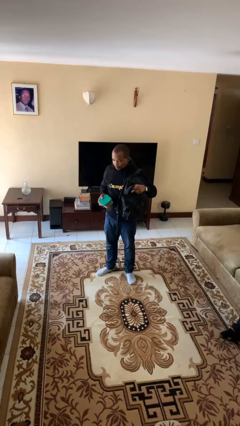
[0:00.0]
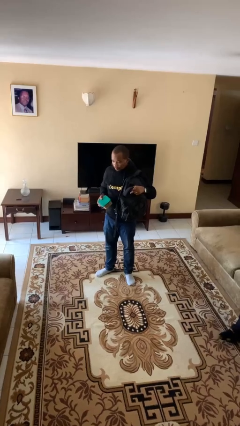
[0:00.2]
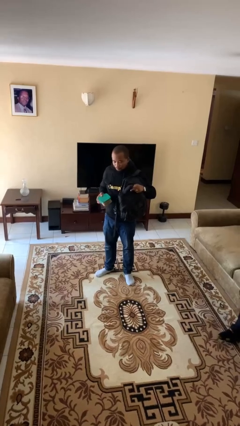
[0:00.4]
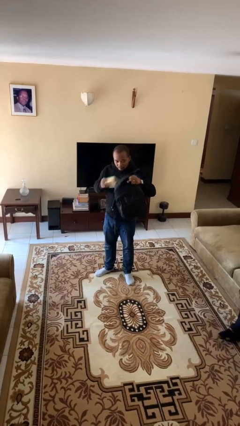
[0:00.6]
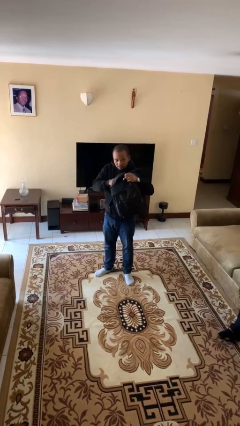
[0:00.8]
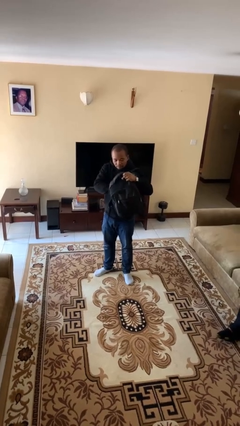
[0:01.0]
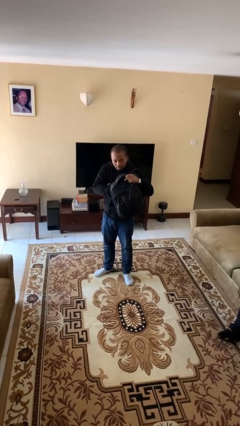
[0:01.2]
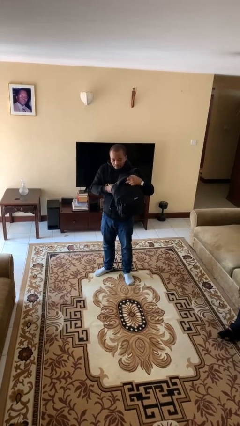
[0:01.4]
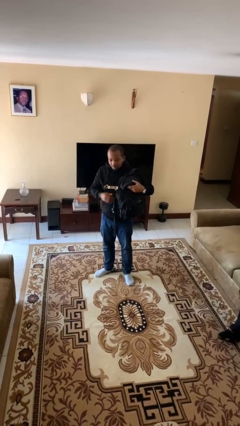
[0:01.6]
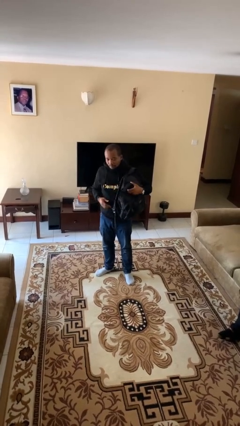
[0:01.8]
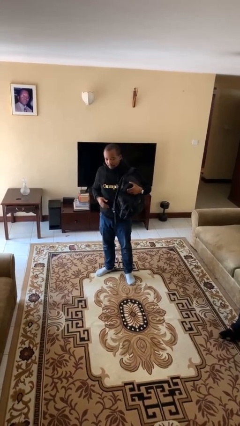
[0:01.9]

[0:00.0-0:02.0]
person puts object into backpack

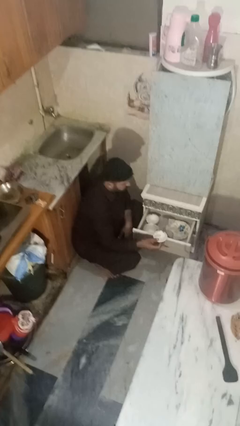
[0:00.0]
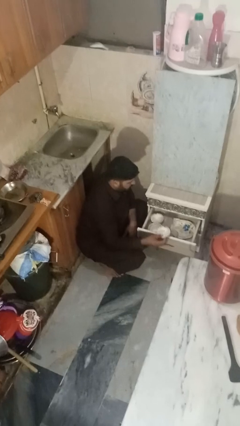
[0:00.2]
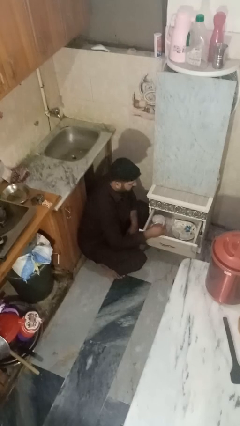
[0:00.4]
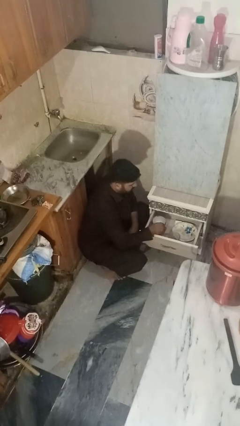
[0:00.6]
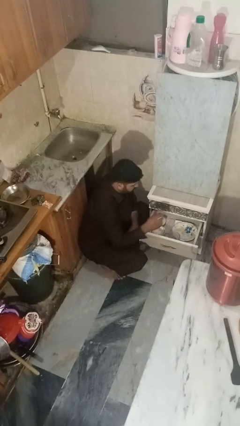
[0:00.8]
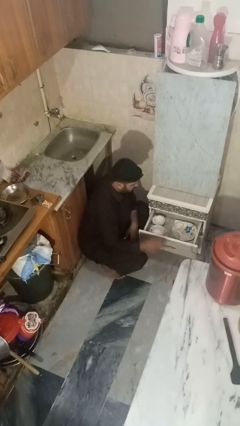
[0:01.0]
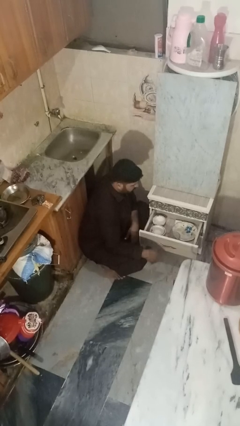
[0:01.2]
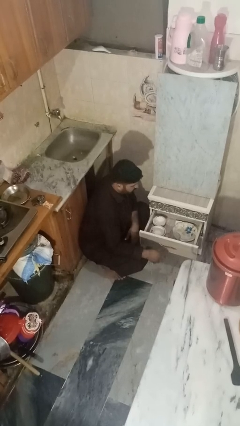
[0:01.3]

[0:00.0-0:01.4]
person puts object into kitchen drawer

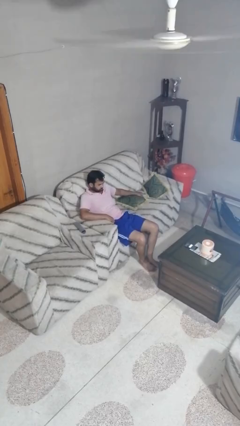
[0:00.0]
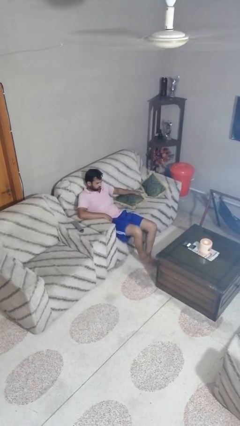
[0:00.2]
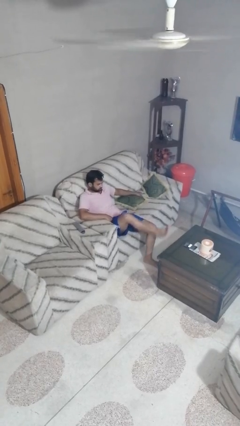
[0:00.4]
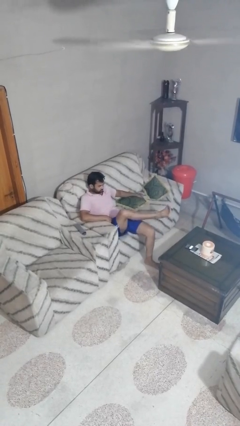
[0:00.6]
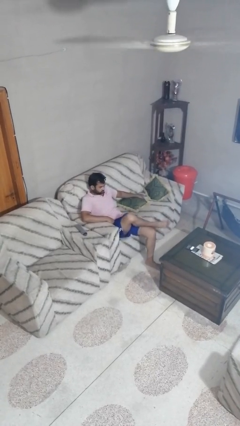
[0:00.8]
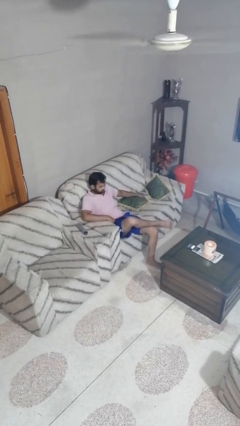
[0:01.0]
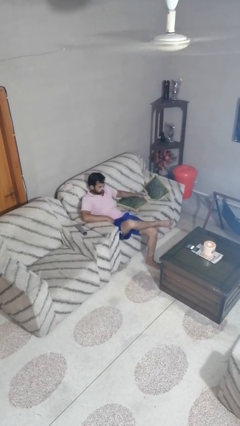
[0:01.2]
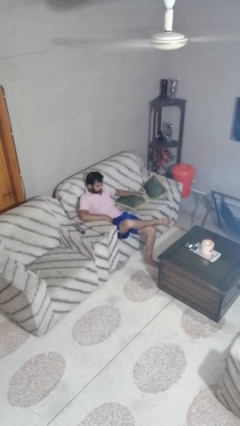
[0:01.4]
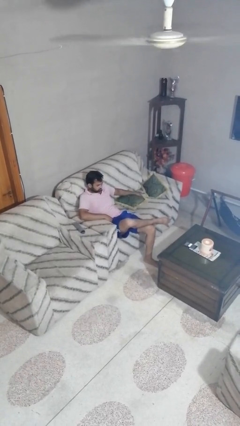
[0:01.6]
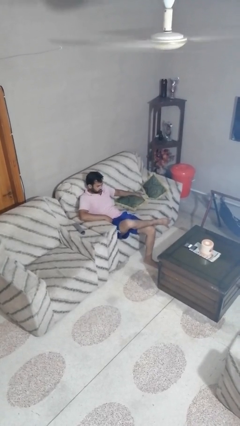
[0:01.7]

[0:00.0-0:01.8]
person crosses legs

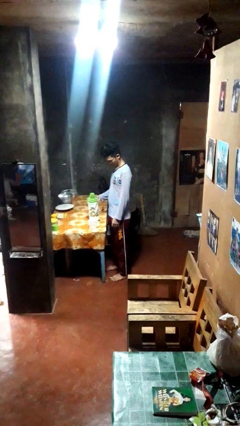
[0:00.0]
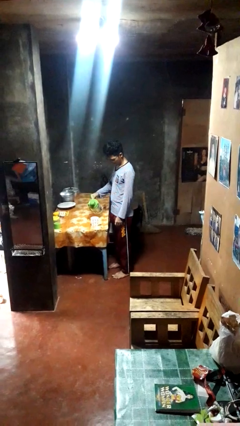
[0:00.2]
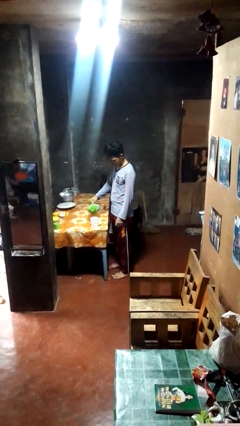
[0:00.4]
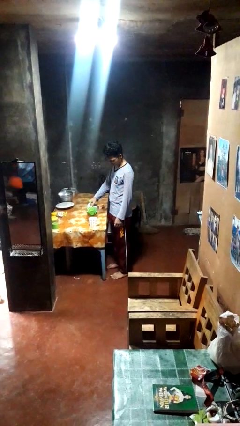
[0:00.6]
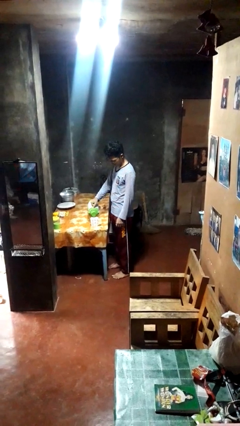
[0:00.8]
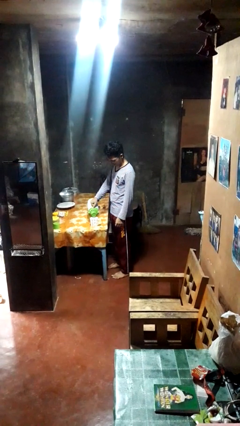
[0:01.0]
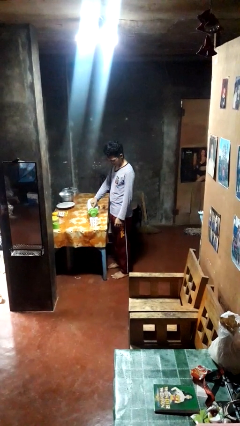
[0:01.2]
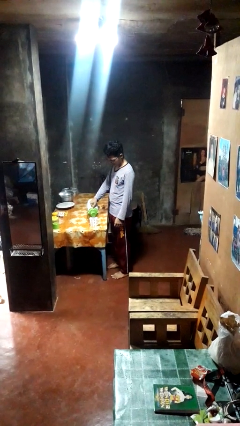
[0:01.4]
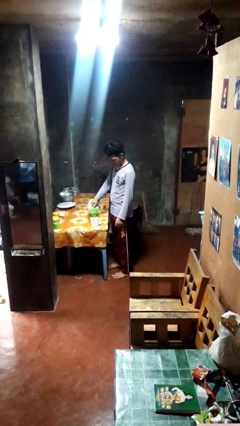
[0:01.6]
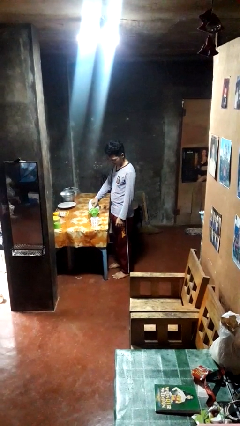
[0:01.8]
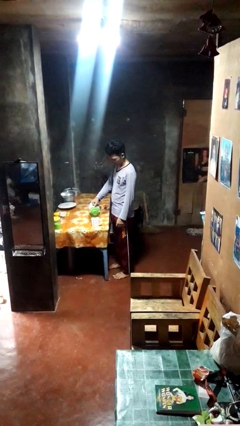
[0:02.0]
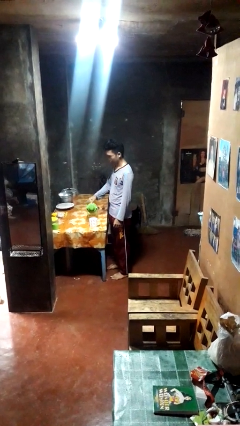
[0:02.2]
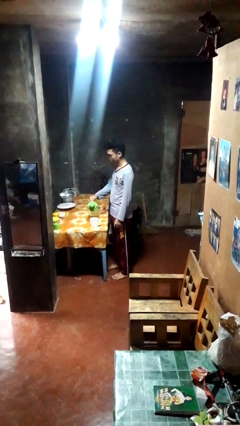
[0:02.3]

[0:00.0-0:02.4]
person pours coffee into mug

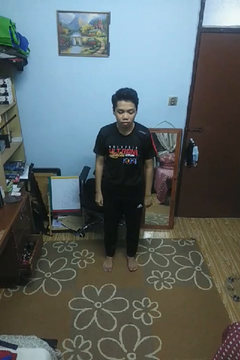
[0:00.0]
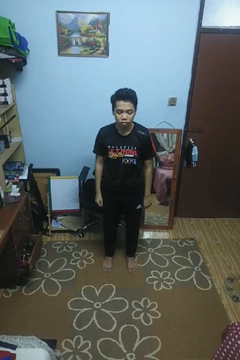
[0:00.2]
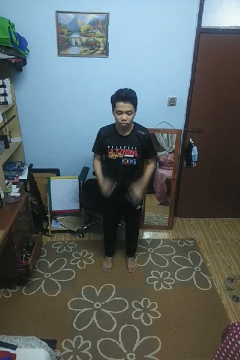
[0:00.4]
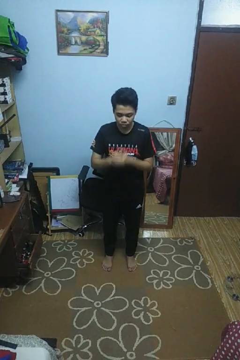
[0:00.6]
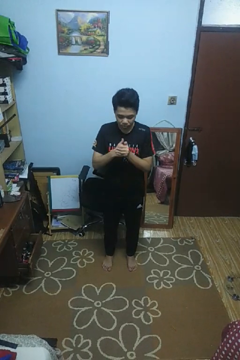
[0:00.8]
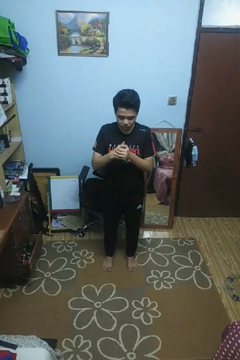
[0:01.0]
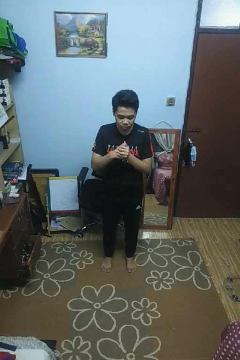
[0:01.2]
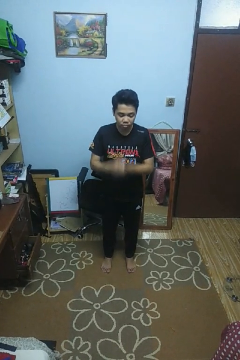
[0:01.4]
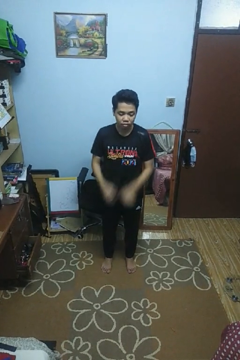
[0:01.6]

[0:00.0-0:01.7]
person cracks knuckles

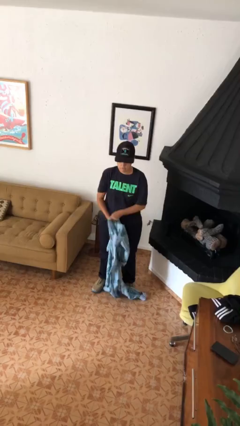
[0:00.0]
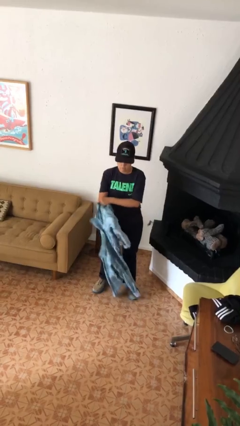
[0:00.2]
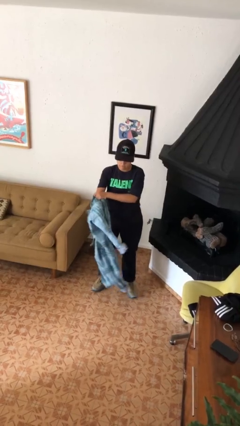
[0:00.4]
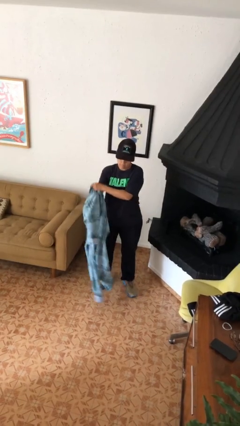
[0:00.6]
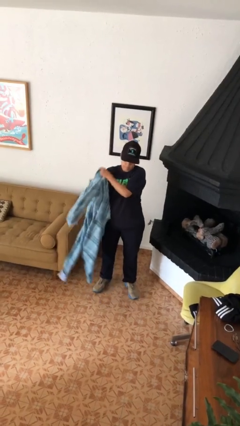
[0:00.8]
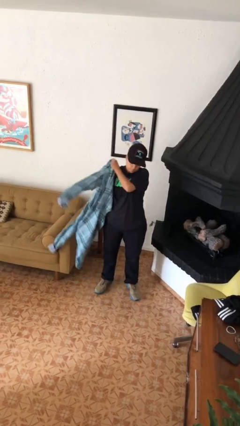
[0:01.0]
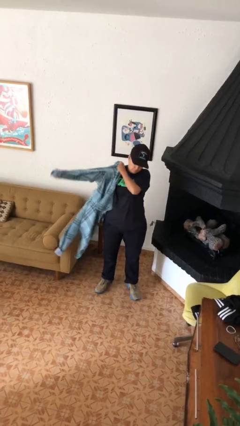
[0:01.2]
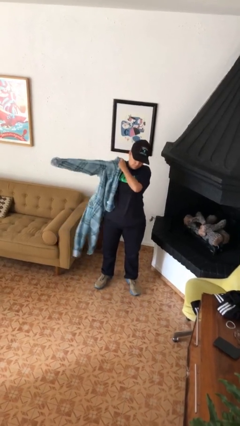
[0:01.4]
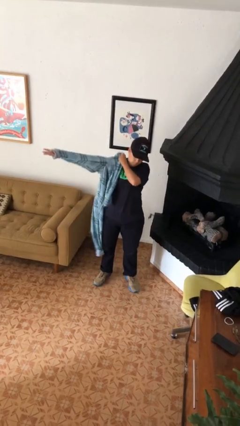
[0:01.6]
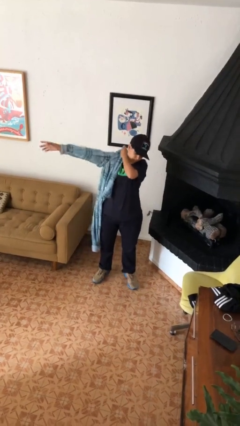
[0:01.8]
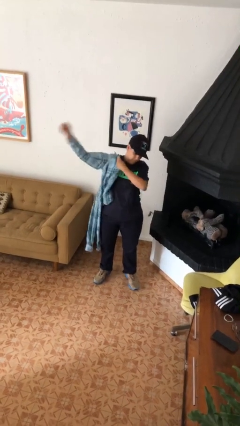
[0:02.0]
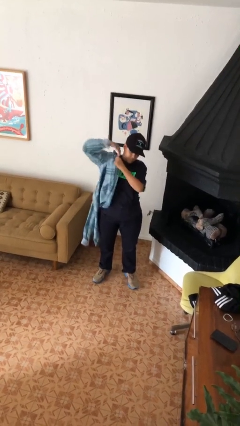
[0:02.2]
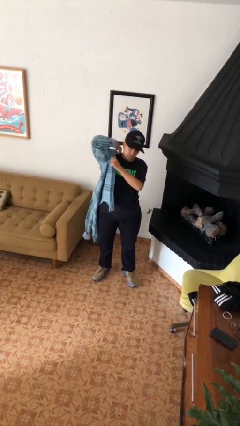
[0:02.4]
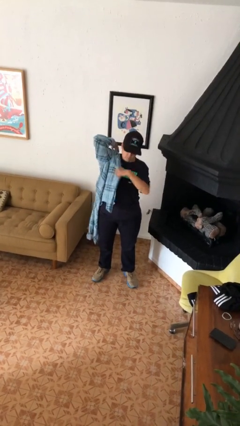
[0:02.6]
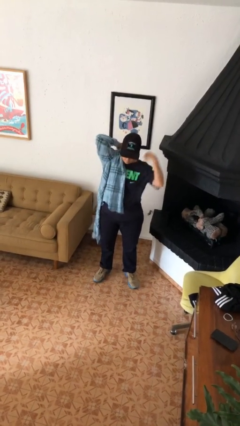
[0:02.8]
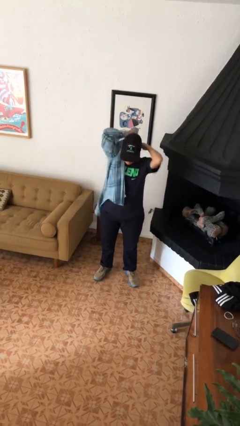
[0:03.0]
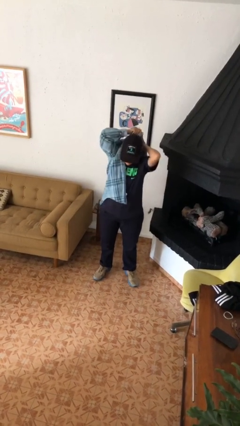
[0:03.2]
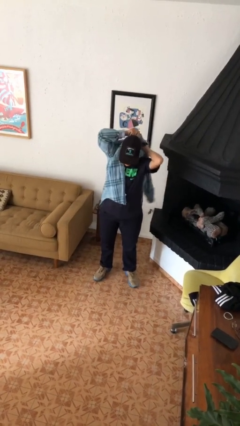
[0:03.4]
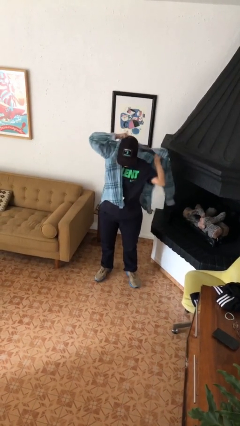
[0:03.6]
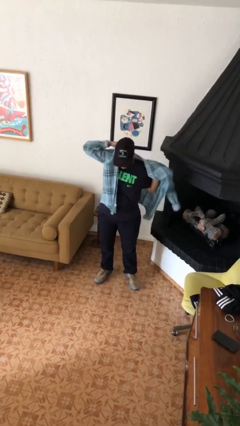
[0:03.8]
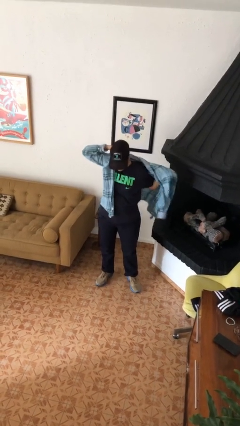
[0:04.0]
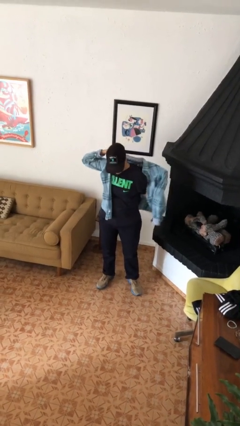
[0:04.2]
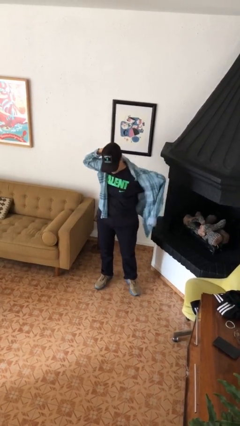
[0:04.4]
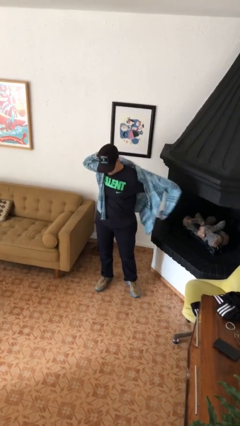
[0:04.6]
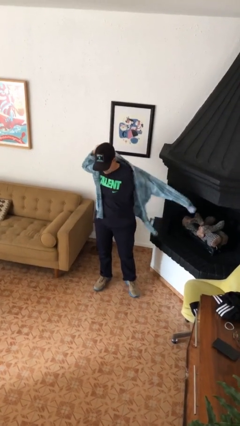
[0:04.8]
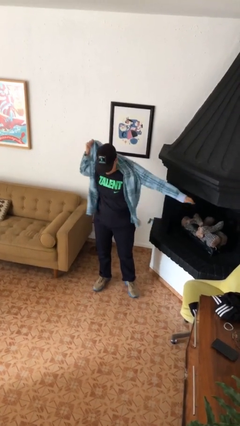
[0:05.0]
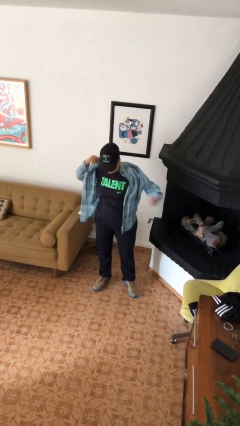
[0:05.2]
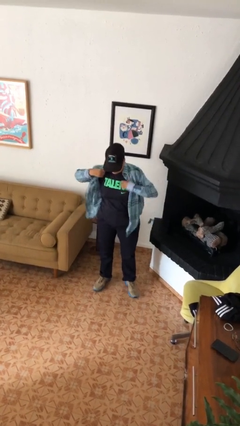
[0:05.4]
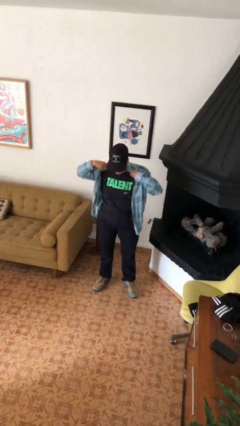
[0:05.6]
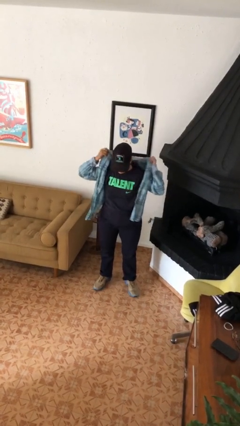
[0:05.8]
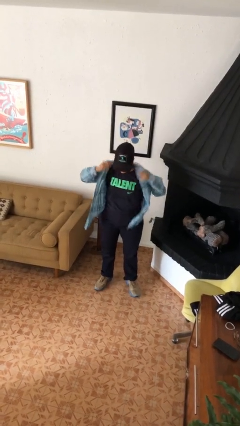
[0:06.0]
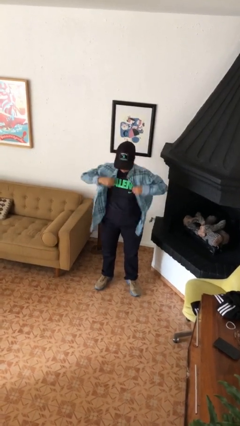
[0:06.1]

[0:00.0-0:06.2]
person puts on shirt

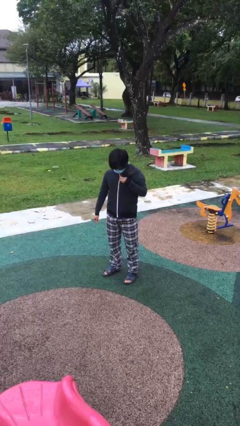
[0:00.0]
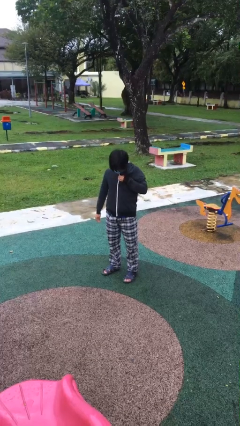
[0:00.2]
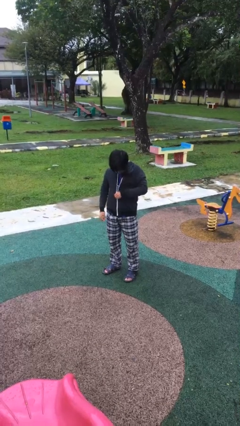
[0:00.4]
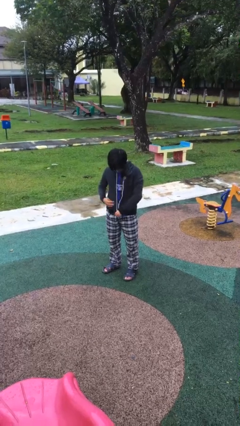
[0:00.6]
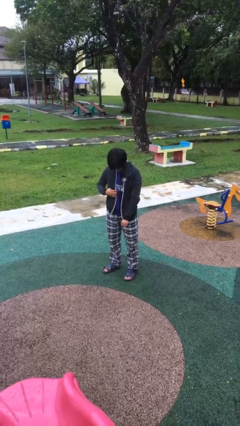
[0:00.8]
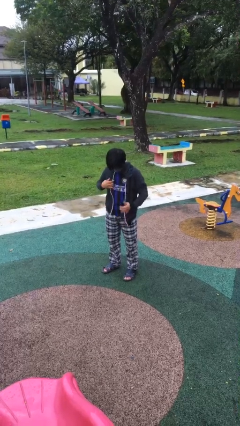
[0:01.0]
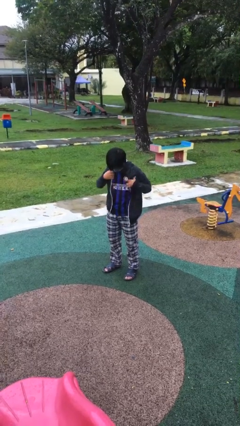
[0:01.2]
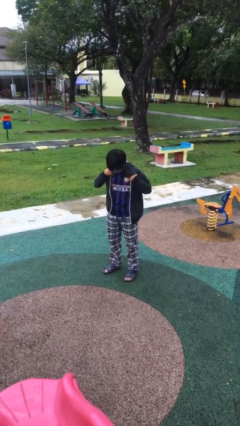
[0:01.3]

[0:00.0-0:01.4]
person unzips jacket

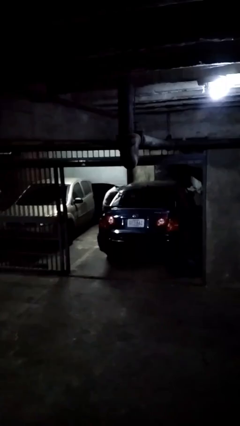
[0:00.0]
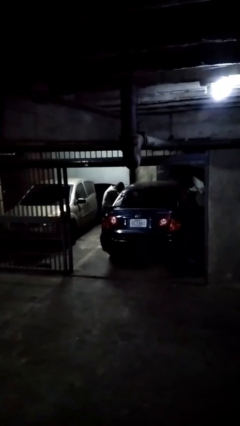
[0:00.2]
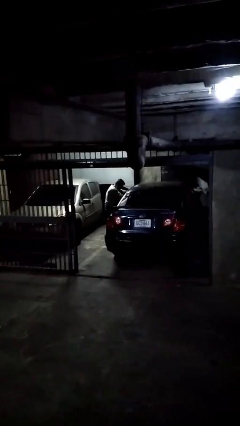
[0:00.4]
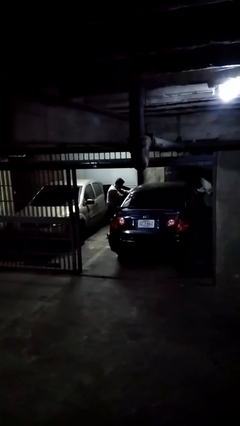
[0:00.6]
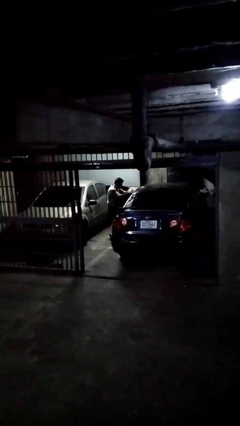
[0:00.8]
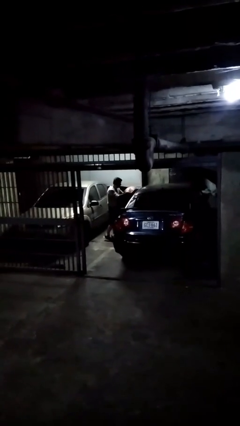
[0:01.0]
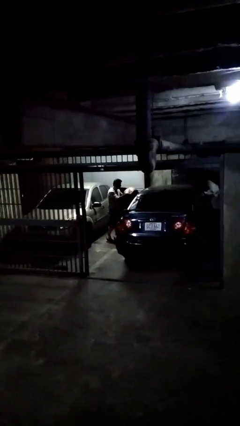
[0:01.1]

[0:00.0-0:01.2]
person unloads car
